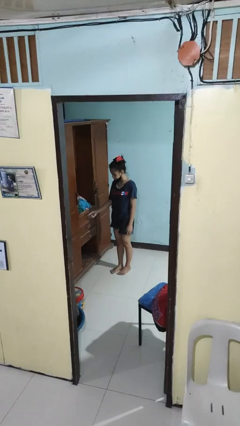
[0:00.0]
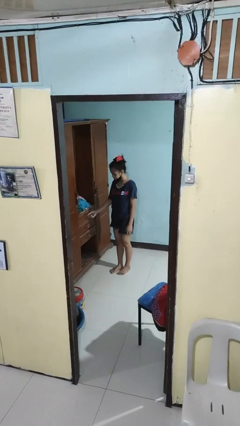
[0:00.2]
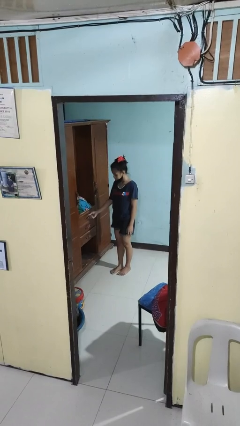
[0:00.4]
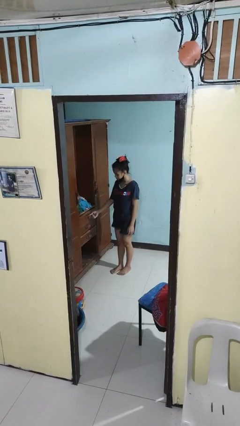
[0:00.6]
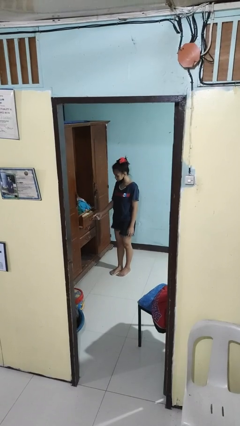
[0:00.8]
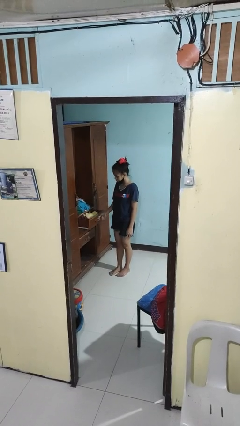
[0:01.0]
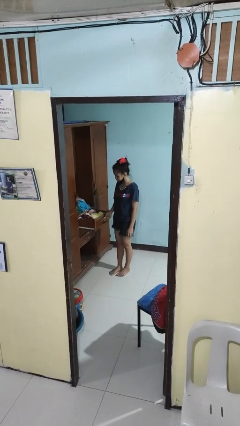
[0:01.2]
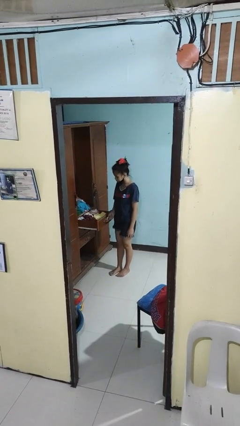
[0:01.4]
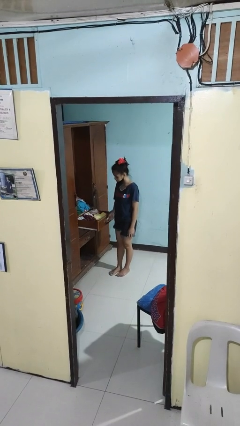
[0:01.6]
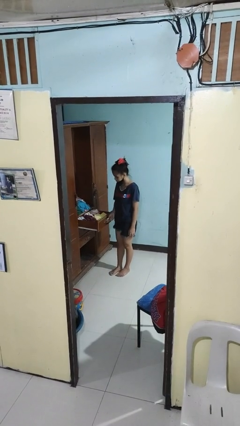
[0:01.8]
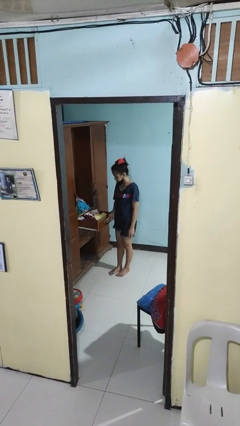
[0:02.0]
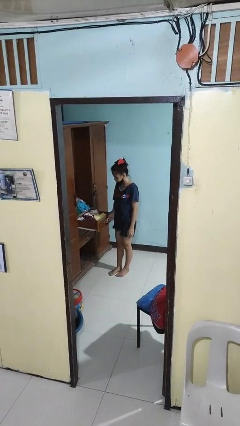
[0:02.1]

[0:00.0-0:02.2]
person opens dresser drawer

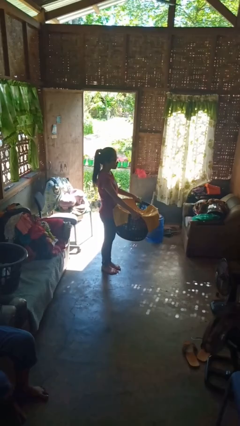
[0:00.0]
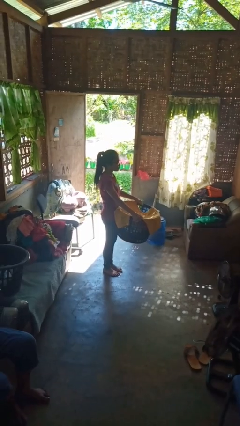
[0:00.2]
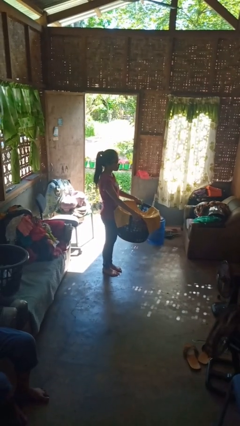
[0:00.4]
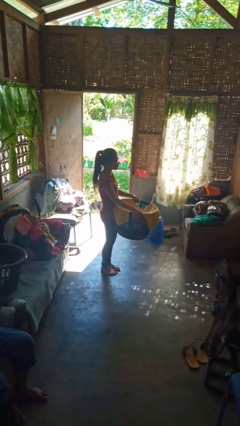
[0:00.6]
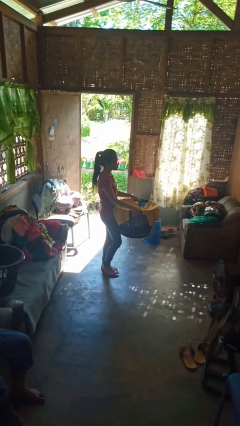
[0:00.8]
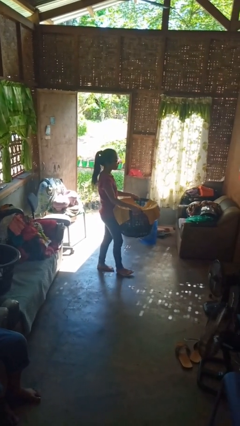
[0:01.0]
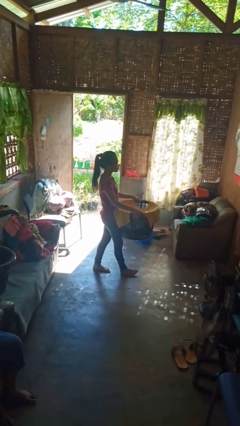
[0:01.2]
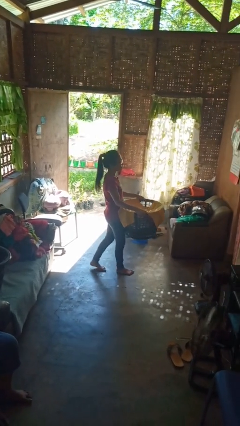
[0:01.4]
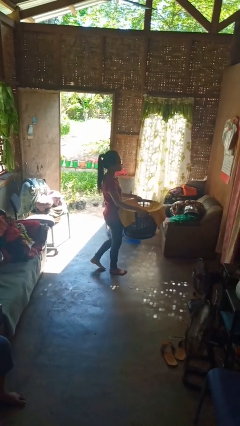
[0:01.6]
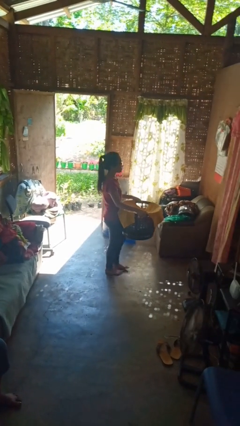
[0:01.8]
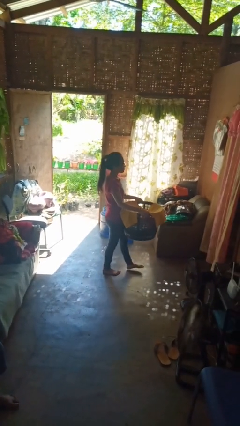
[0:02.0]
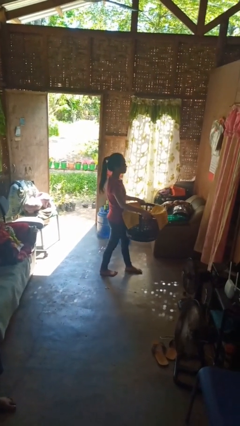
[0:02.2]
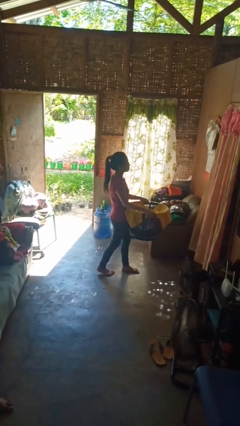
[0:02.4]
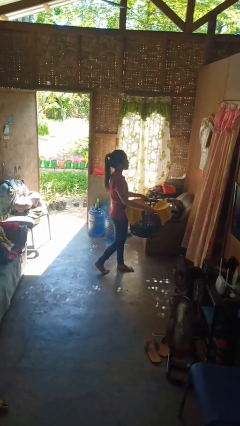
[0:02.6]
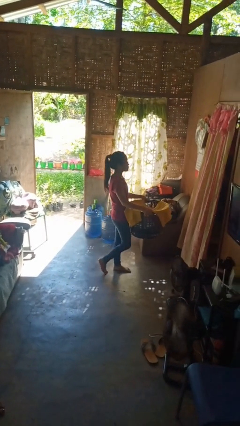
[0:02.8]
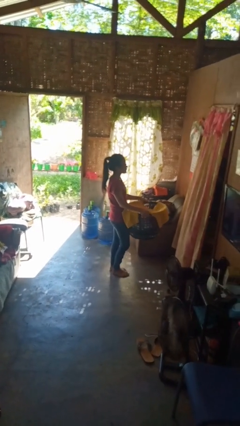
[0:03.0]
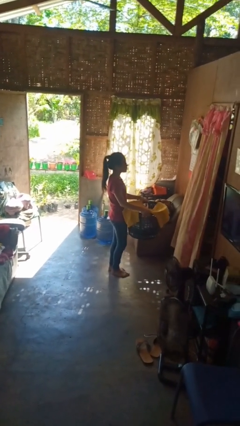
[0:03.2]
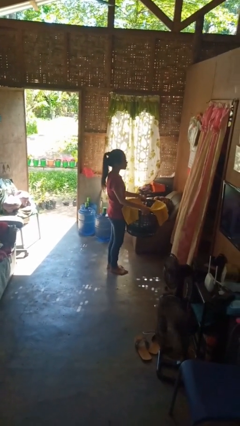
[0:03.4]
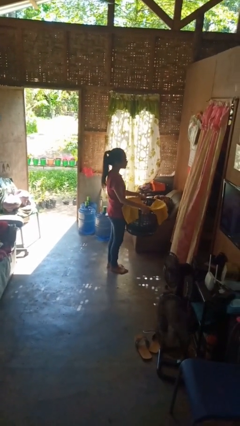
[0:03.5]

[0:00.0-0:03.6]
person carries laundry basket

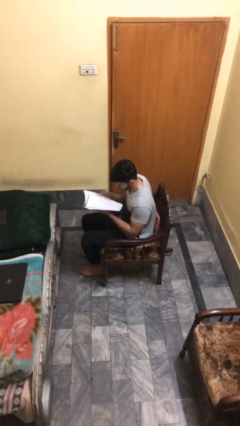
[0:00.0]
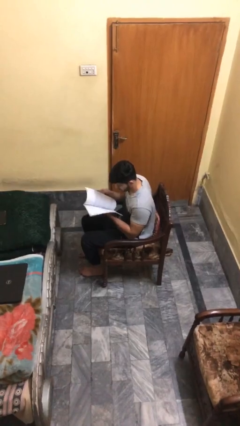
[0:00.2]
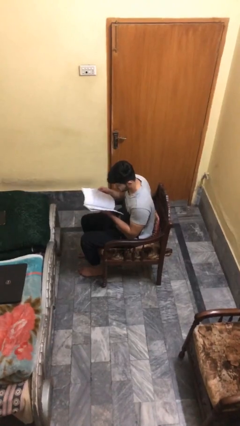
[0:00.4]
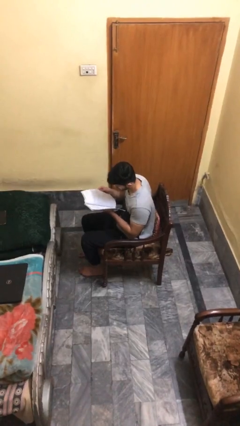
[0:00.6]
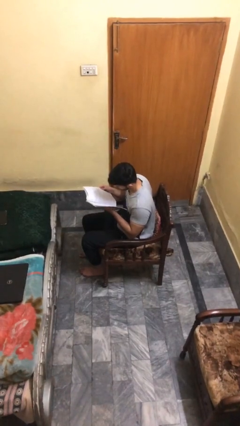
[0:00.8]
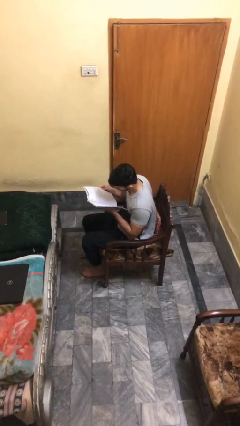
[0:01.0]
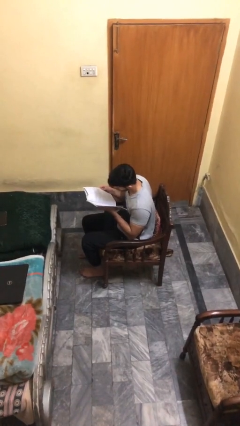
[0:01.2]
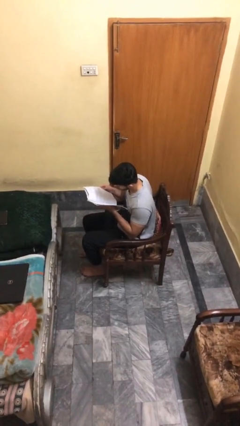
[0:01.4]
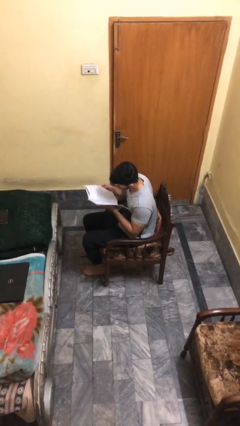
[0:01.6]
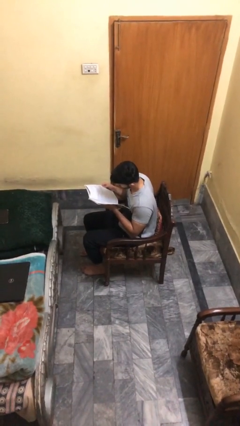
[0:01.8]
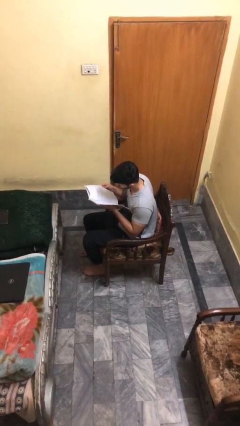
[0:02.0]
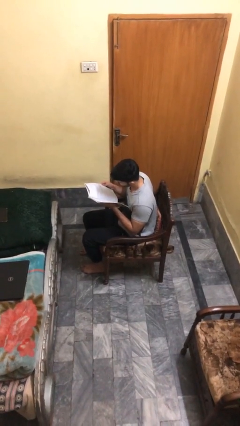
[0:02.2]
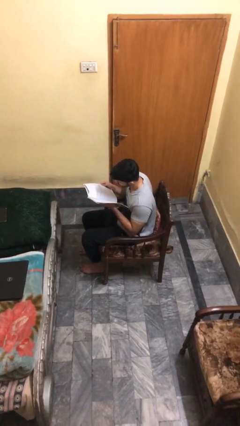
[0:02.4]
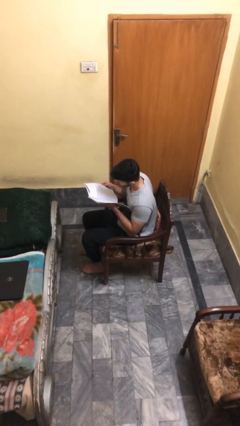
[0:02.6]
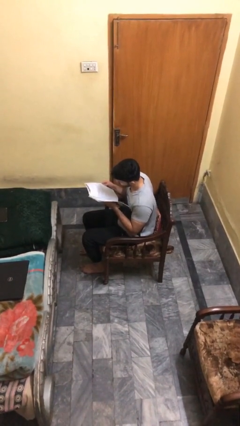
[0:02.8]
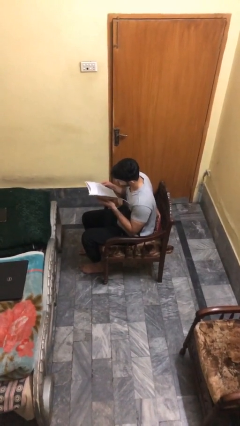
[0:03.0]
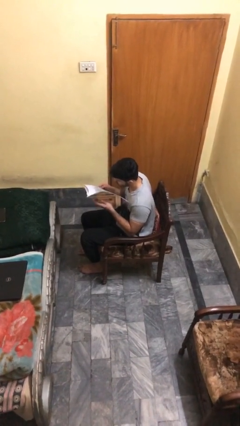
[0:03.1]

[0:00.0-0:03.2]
person reads document

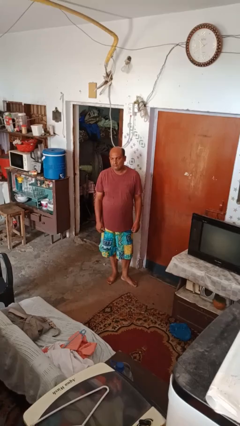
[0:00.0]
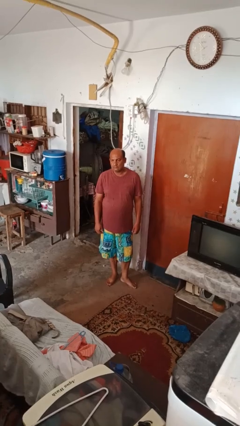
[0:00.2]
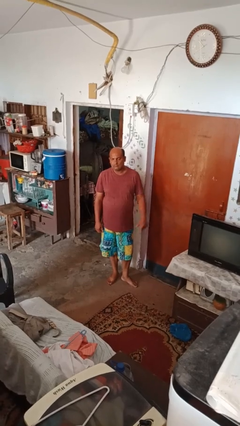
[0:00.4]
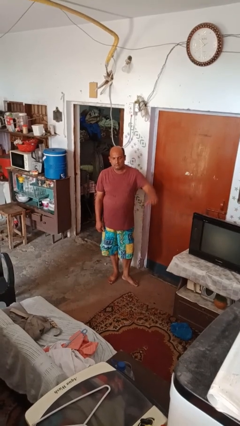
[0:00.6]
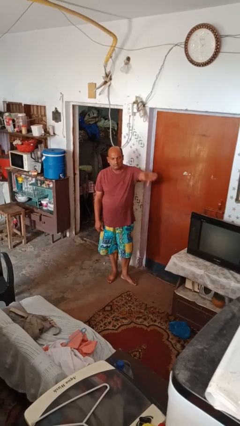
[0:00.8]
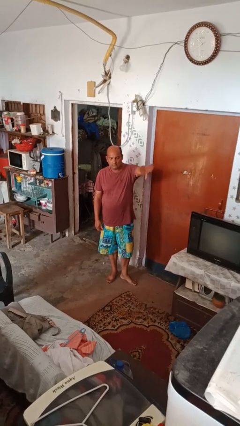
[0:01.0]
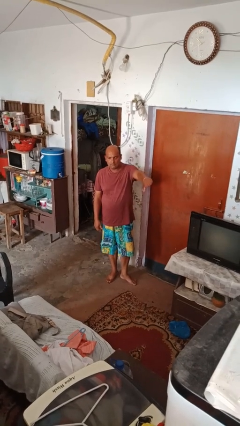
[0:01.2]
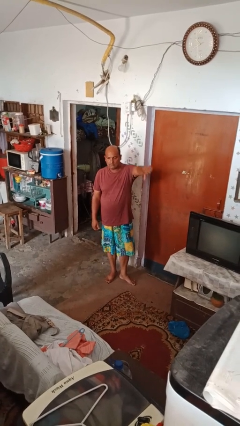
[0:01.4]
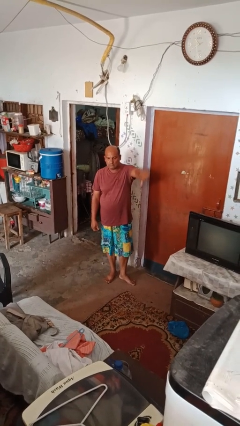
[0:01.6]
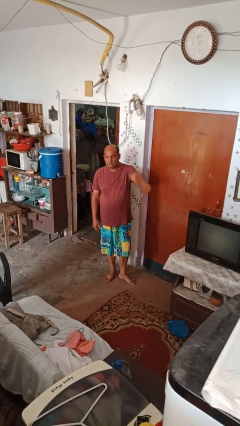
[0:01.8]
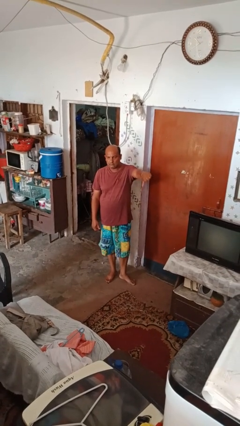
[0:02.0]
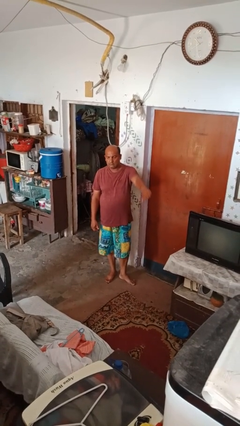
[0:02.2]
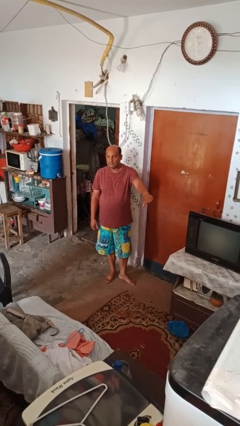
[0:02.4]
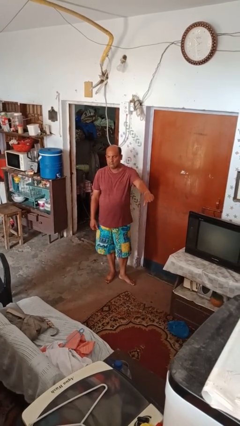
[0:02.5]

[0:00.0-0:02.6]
person gestures thumbs down

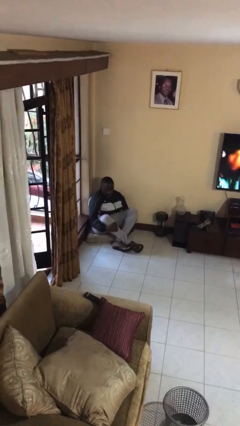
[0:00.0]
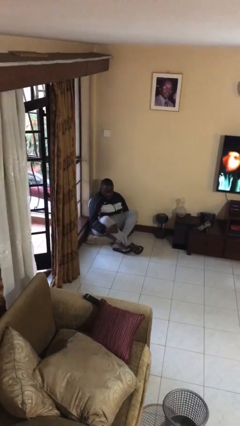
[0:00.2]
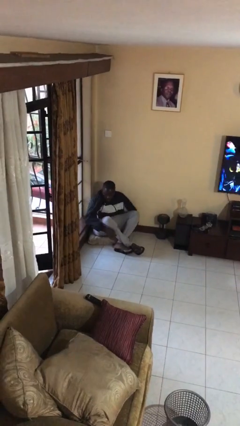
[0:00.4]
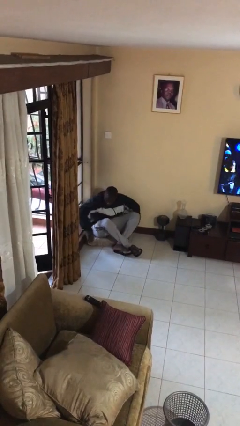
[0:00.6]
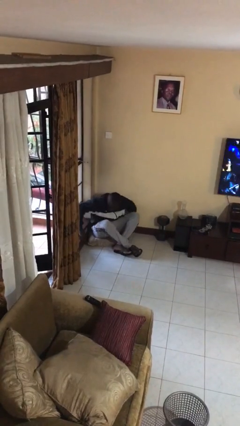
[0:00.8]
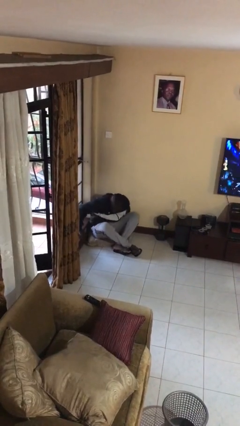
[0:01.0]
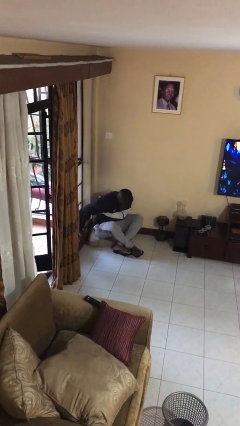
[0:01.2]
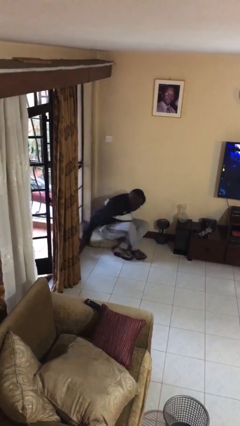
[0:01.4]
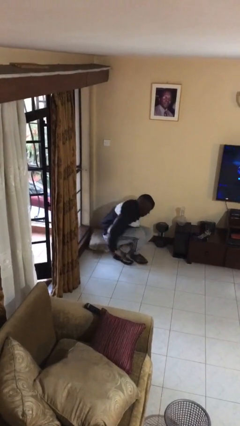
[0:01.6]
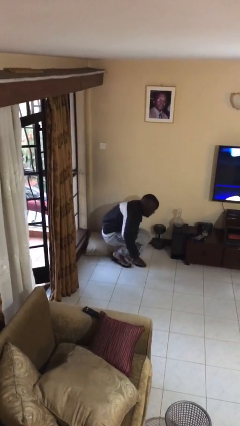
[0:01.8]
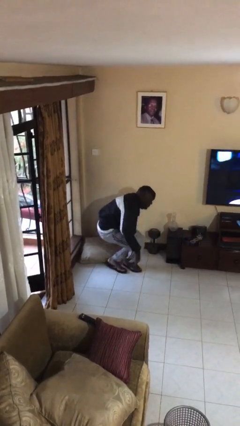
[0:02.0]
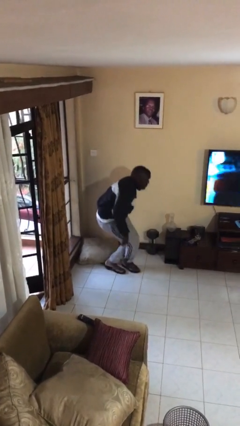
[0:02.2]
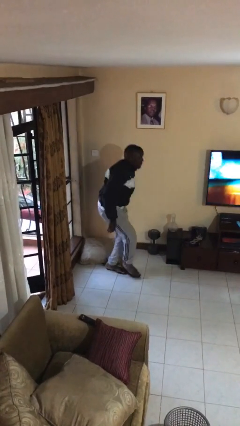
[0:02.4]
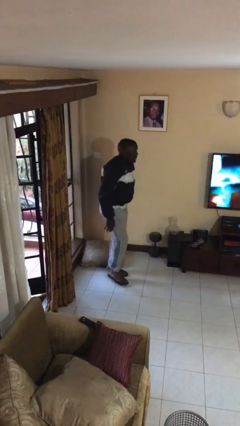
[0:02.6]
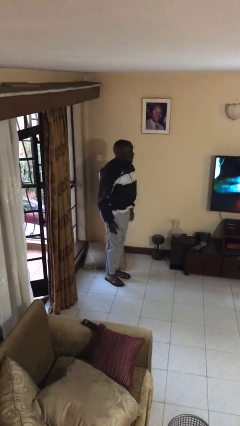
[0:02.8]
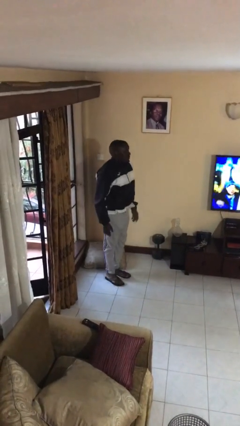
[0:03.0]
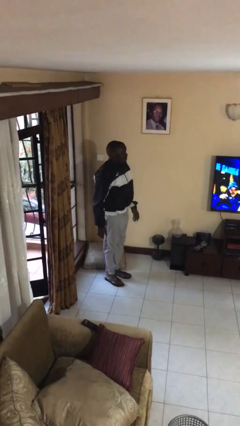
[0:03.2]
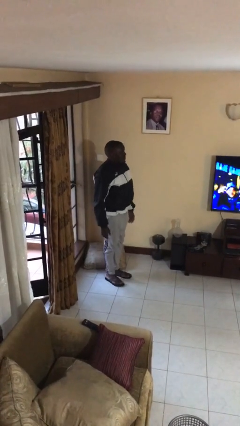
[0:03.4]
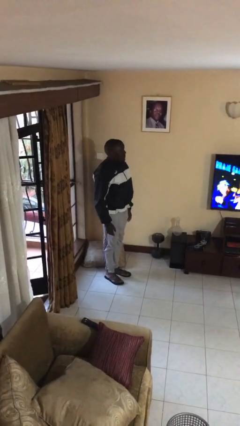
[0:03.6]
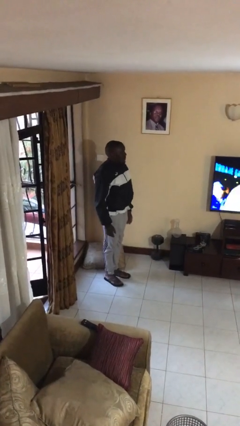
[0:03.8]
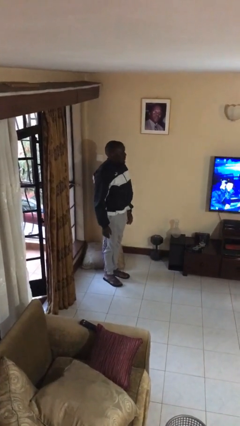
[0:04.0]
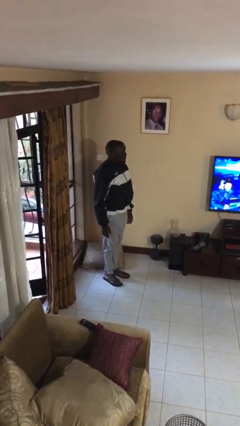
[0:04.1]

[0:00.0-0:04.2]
person stands up from floor

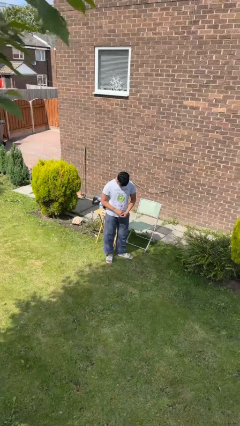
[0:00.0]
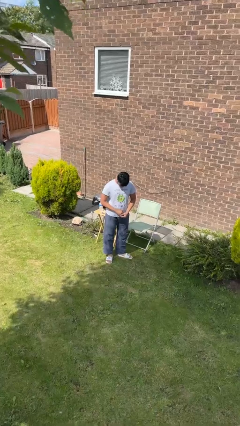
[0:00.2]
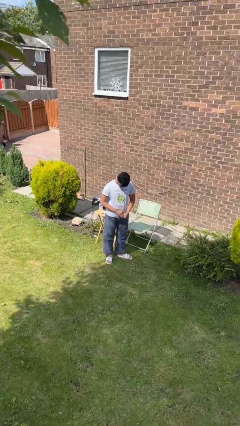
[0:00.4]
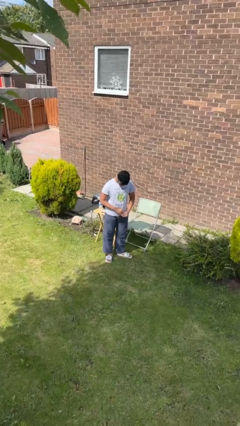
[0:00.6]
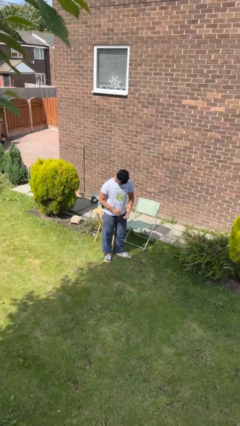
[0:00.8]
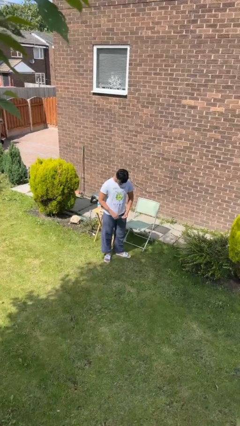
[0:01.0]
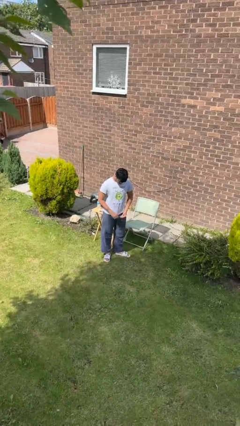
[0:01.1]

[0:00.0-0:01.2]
person takes off ring

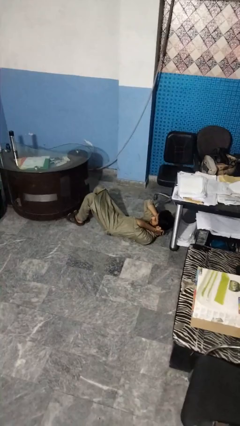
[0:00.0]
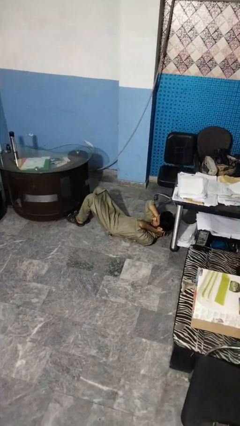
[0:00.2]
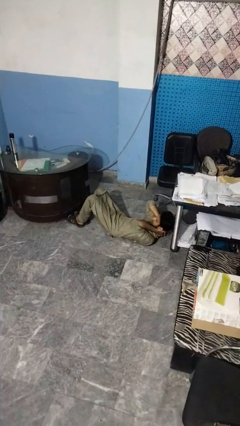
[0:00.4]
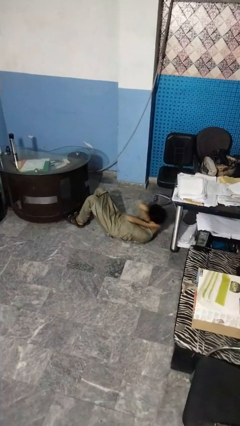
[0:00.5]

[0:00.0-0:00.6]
person exercises with situp
